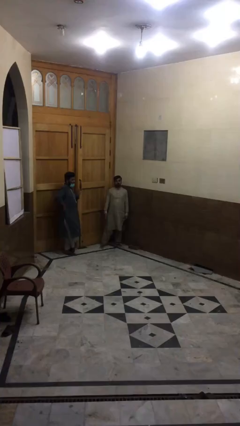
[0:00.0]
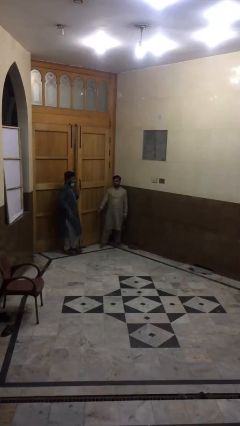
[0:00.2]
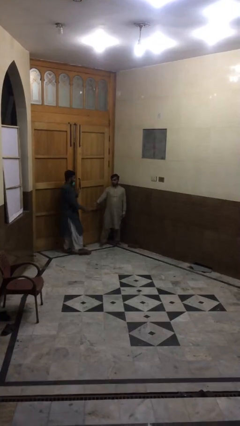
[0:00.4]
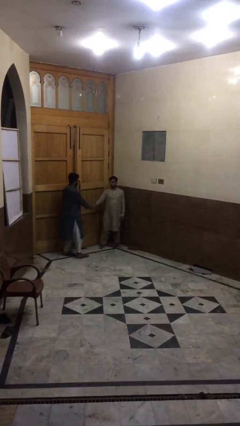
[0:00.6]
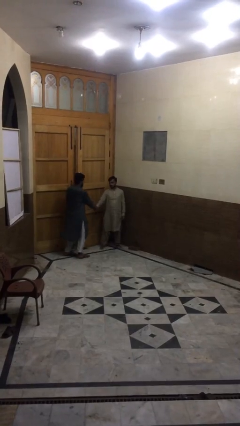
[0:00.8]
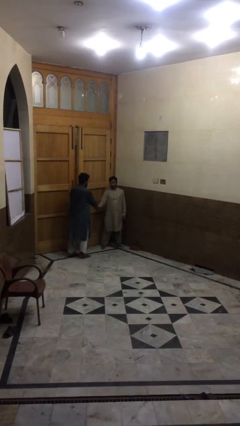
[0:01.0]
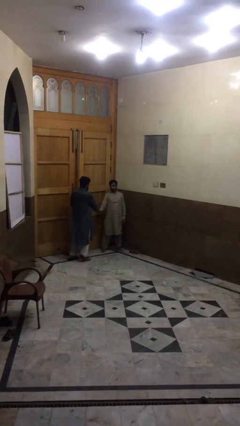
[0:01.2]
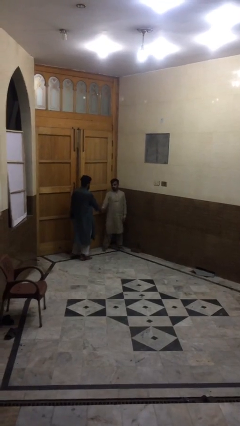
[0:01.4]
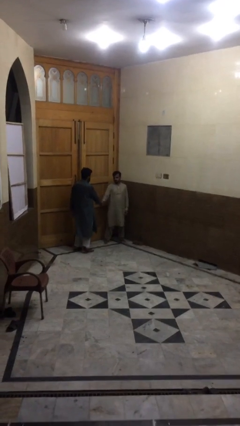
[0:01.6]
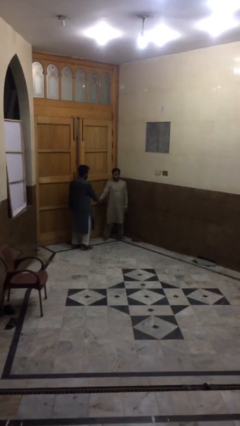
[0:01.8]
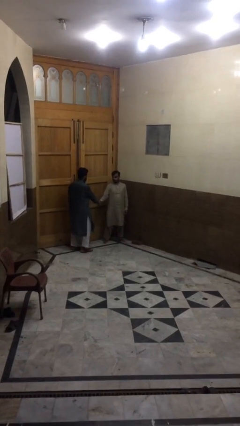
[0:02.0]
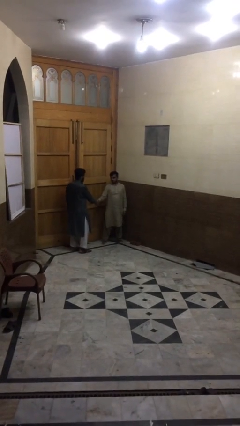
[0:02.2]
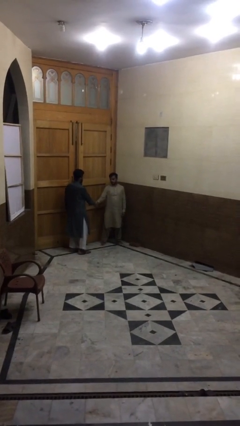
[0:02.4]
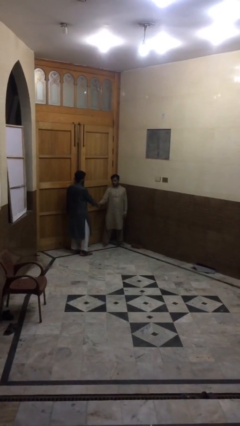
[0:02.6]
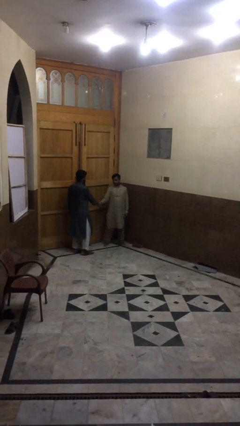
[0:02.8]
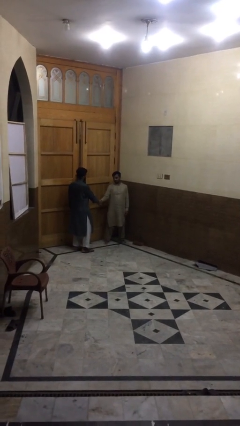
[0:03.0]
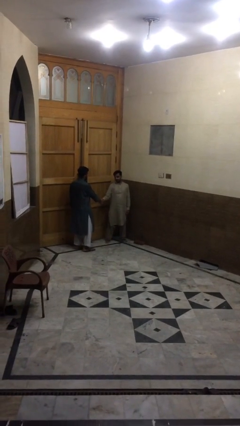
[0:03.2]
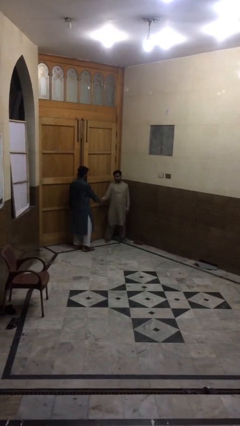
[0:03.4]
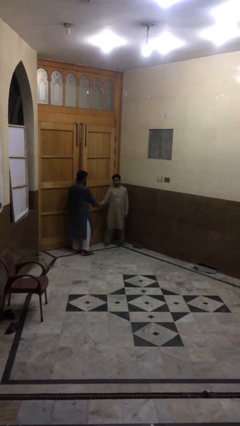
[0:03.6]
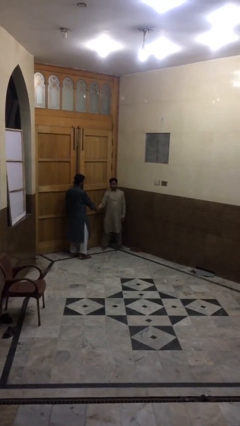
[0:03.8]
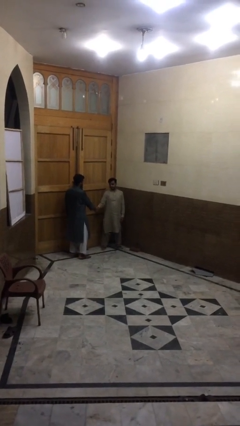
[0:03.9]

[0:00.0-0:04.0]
person shakes hand

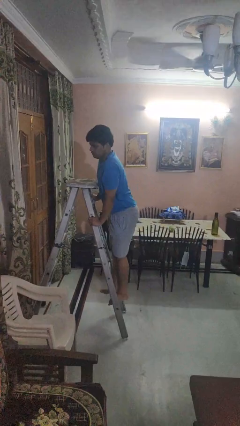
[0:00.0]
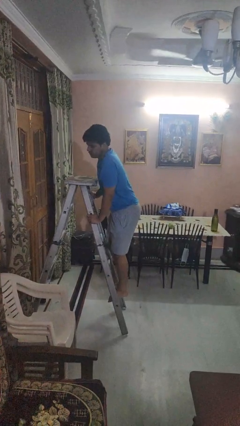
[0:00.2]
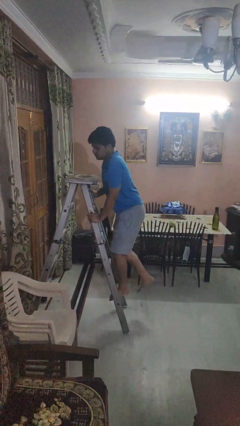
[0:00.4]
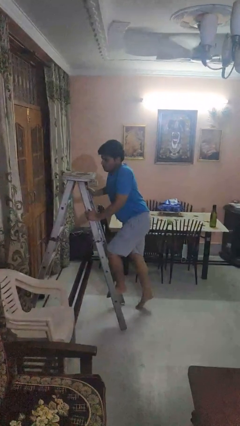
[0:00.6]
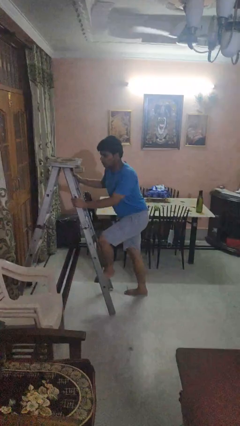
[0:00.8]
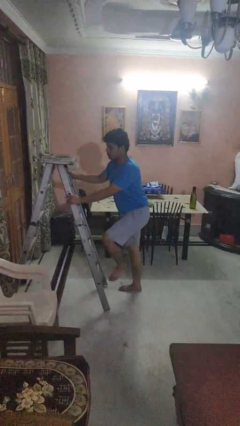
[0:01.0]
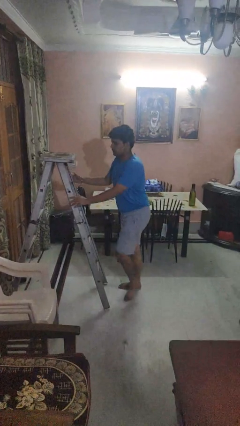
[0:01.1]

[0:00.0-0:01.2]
person climbs down ladder

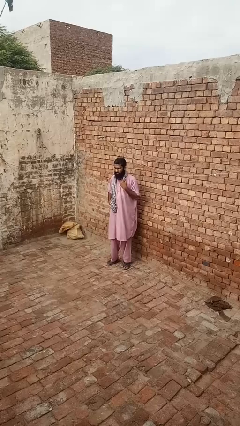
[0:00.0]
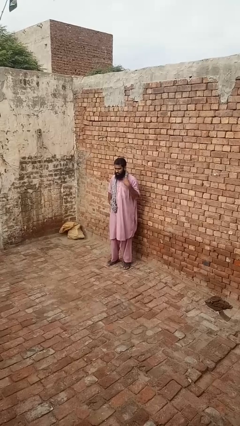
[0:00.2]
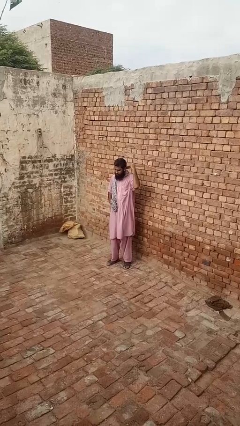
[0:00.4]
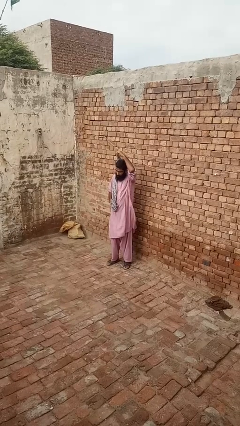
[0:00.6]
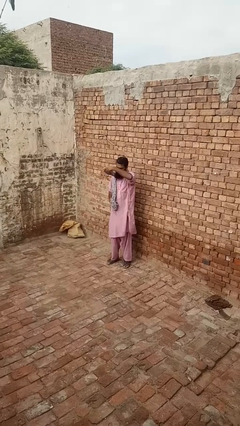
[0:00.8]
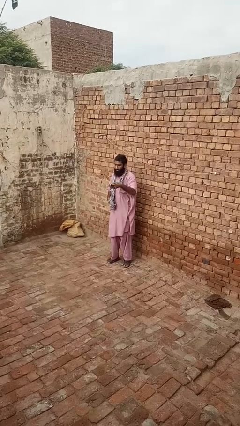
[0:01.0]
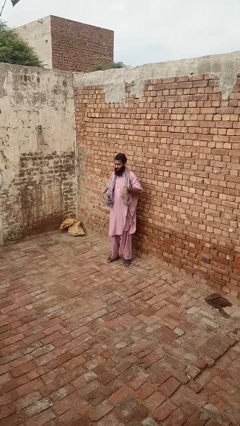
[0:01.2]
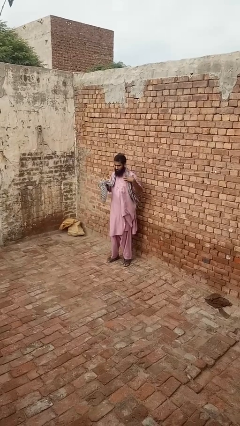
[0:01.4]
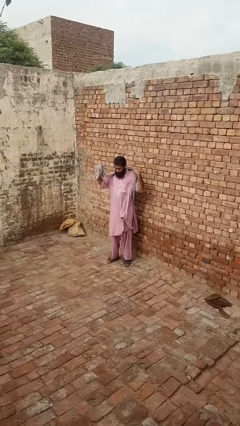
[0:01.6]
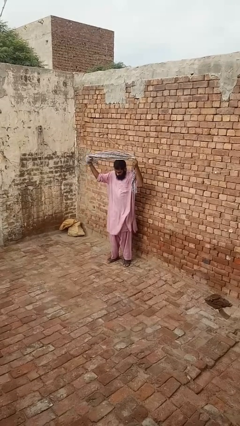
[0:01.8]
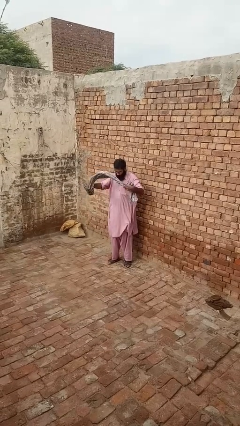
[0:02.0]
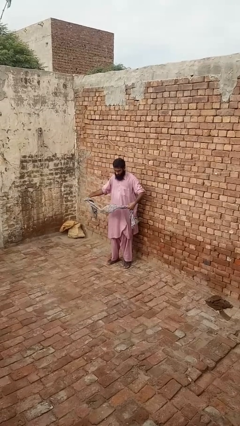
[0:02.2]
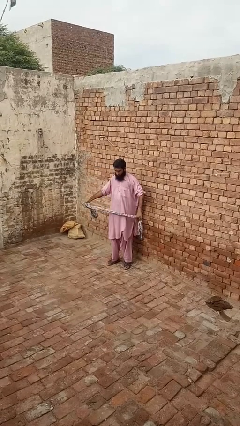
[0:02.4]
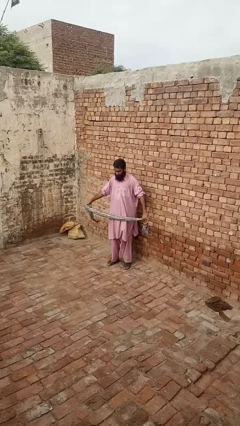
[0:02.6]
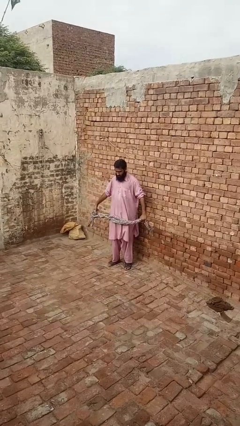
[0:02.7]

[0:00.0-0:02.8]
person takes off scarf

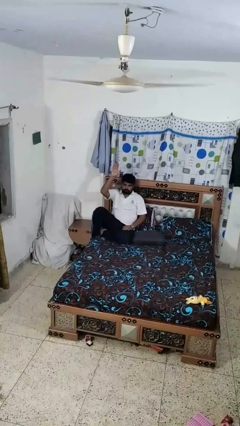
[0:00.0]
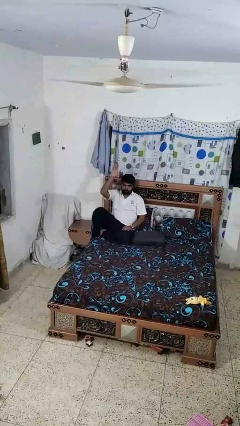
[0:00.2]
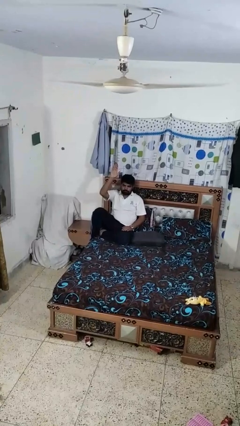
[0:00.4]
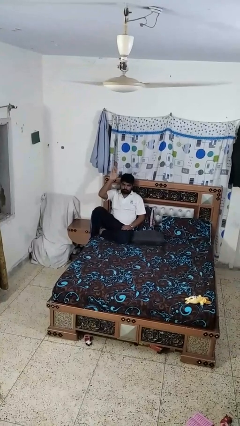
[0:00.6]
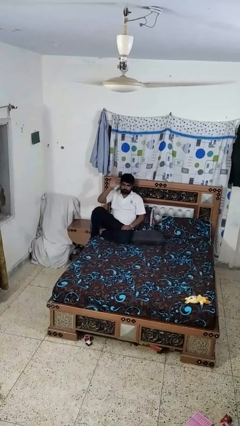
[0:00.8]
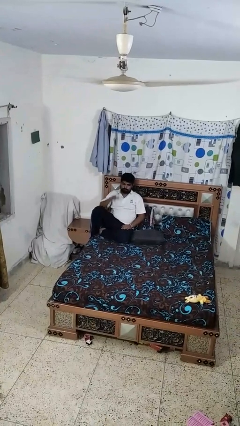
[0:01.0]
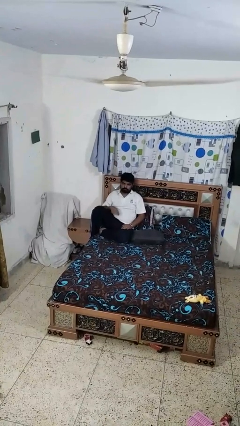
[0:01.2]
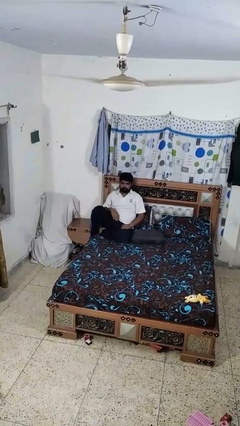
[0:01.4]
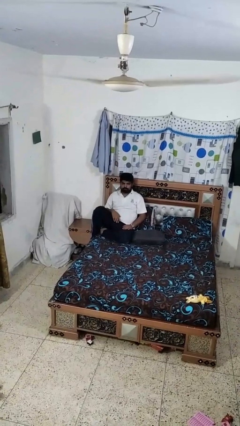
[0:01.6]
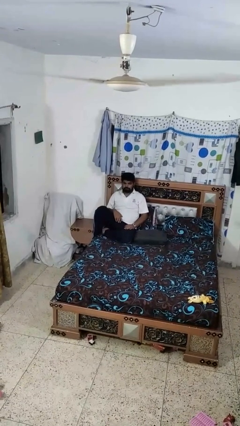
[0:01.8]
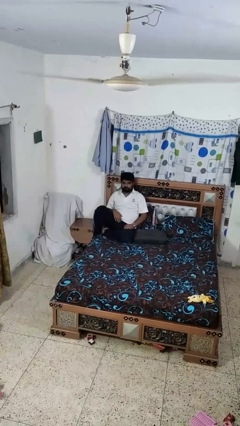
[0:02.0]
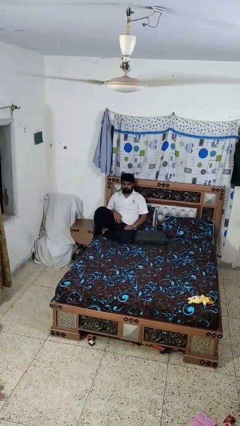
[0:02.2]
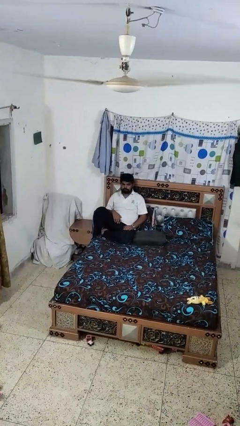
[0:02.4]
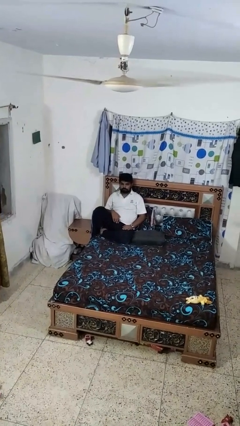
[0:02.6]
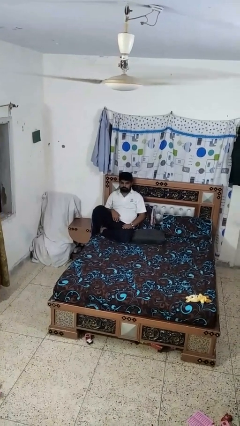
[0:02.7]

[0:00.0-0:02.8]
person gestures lower hand

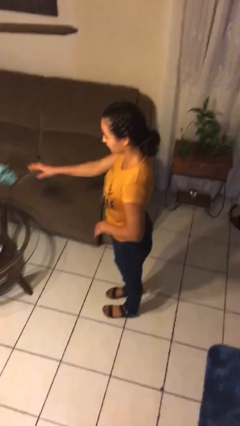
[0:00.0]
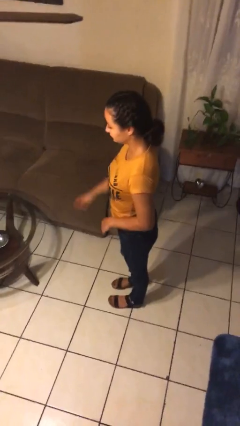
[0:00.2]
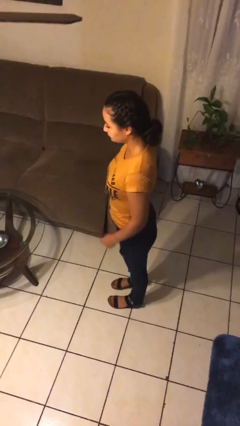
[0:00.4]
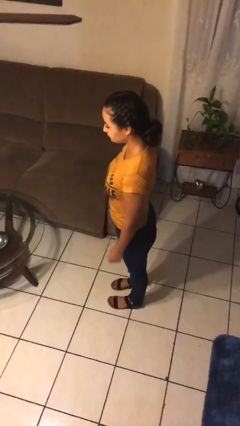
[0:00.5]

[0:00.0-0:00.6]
person throws object on table

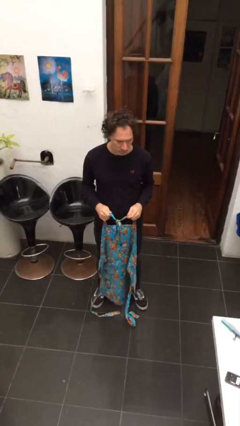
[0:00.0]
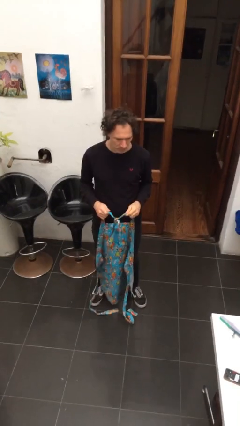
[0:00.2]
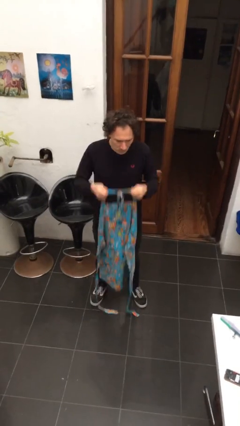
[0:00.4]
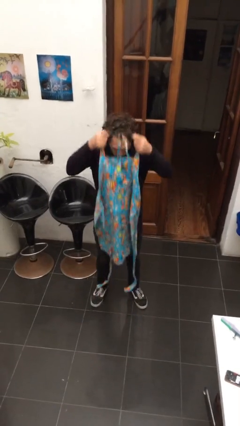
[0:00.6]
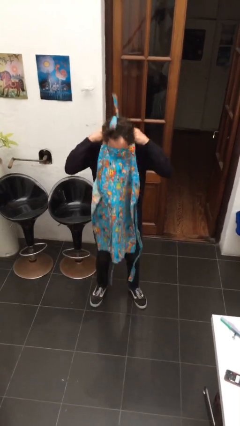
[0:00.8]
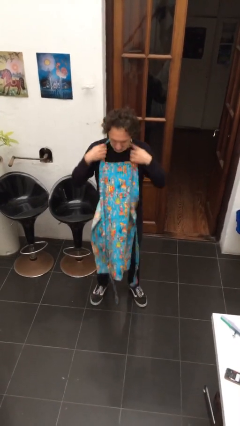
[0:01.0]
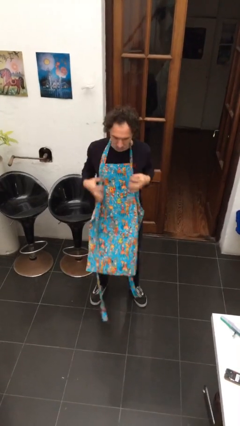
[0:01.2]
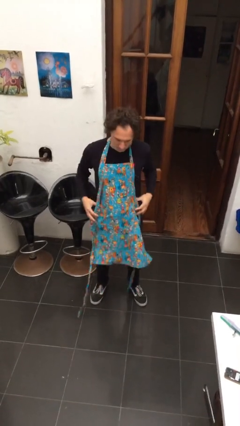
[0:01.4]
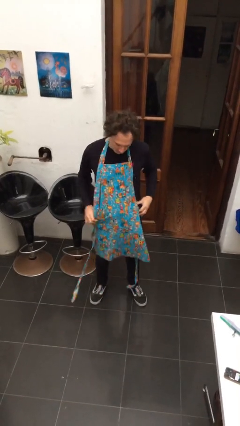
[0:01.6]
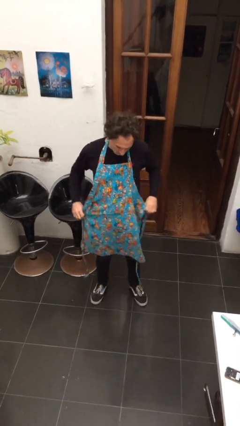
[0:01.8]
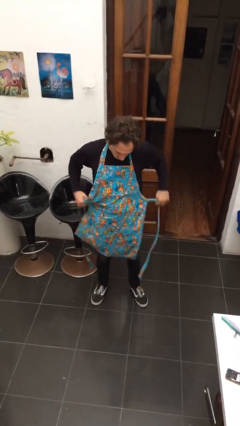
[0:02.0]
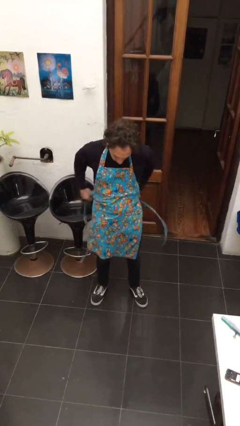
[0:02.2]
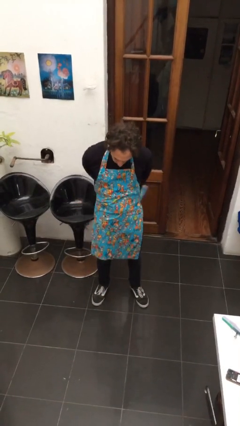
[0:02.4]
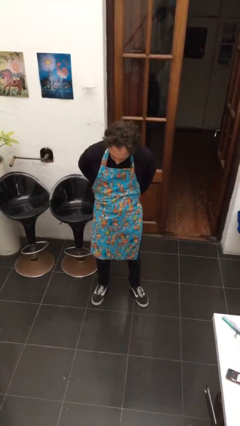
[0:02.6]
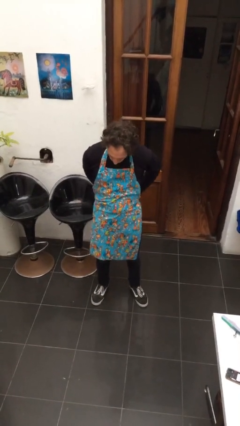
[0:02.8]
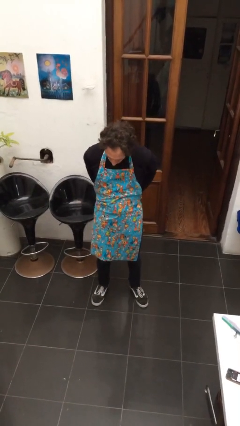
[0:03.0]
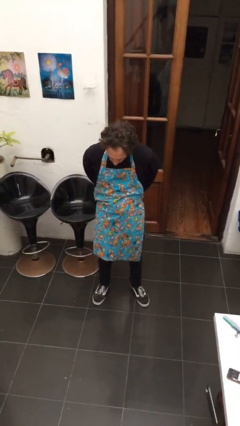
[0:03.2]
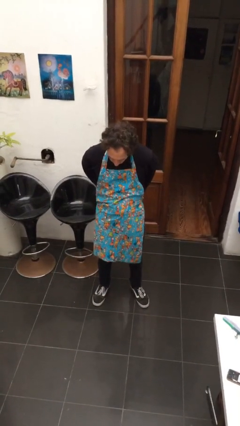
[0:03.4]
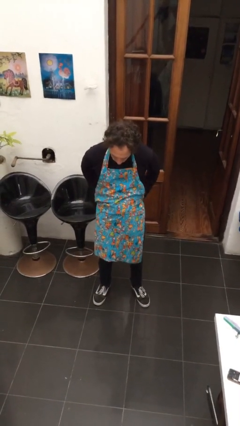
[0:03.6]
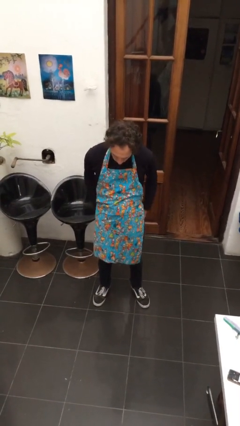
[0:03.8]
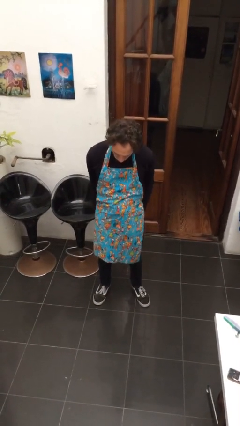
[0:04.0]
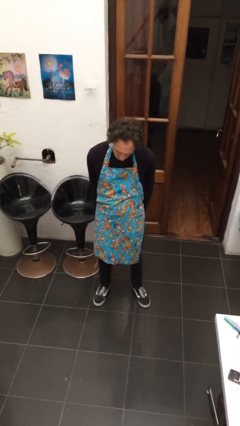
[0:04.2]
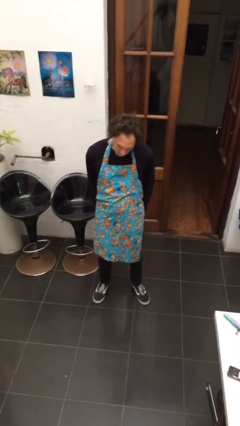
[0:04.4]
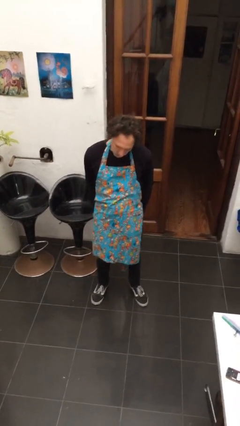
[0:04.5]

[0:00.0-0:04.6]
person puts on apron

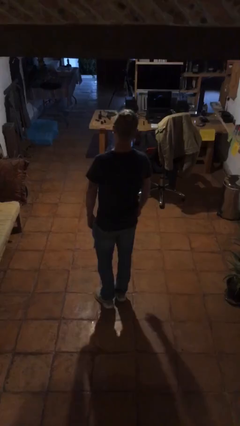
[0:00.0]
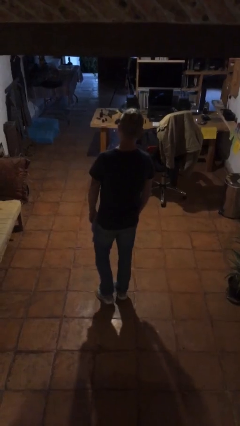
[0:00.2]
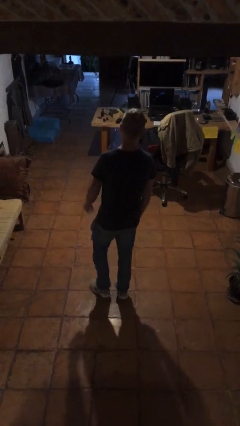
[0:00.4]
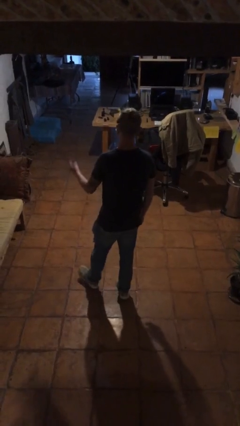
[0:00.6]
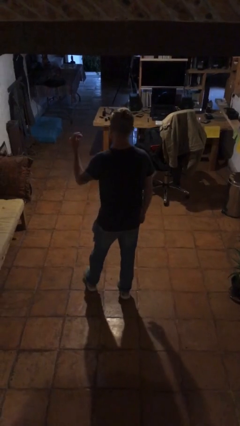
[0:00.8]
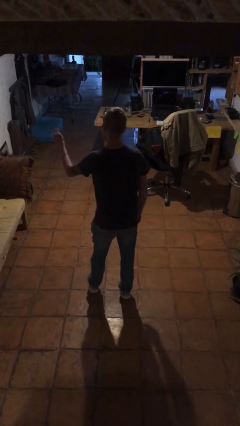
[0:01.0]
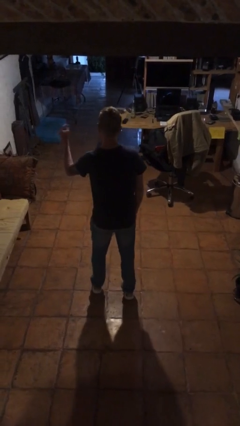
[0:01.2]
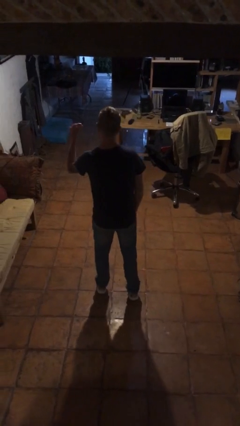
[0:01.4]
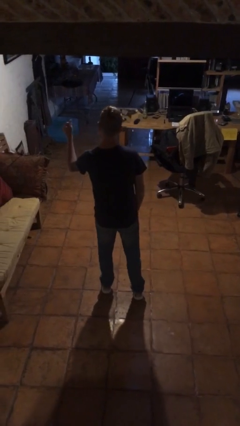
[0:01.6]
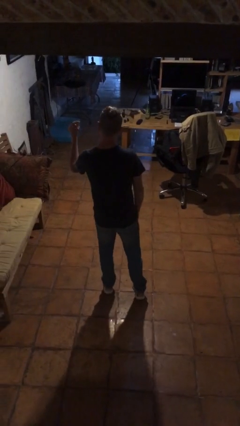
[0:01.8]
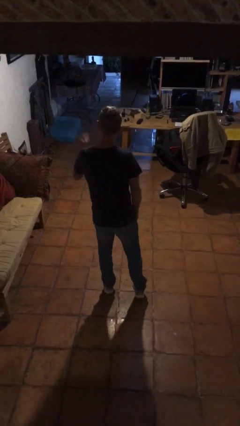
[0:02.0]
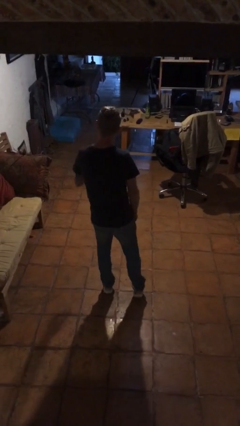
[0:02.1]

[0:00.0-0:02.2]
person snaps fingers
